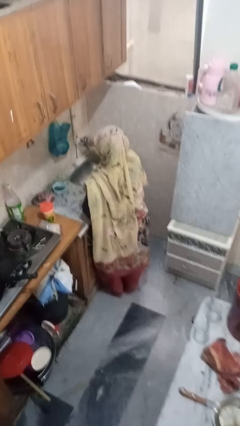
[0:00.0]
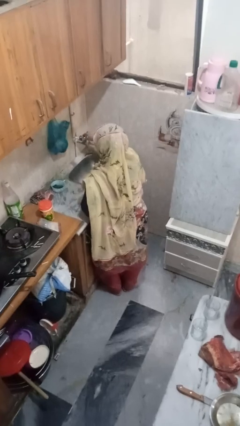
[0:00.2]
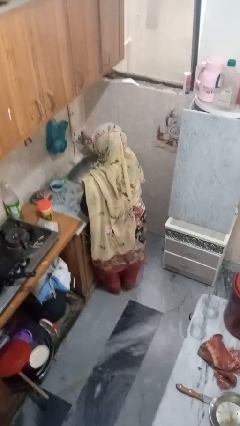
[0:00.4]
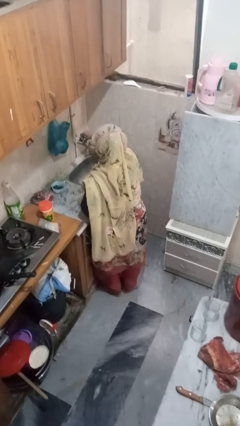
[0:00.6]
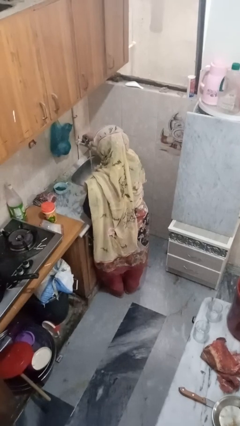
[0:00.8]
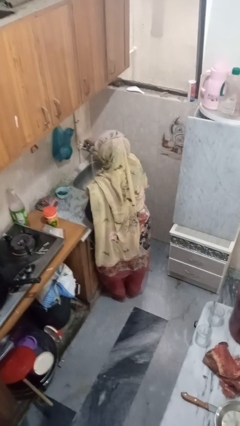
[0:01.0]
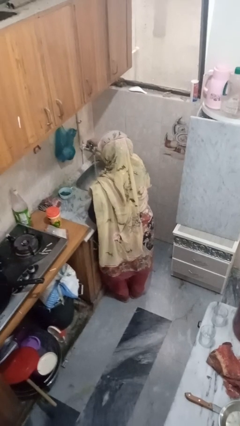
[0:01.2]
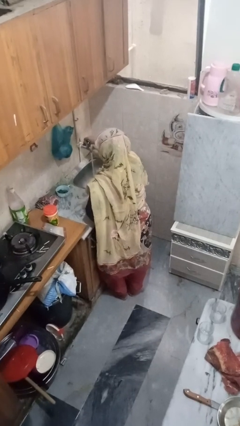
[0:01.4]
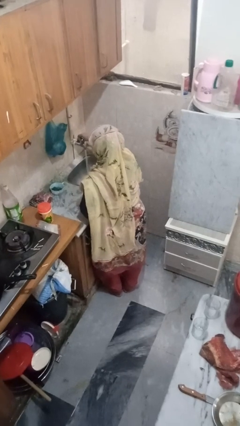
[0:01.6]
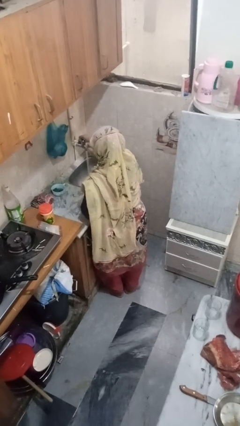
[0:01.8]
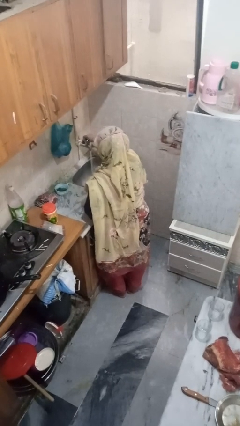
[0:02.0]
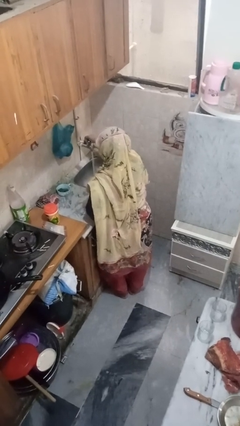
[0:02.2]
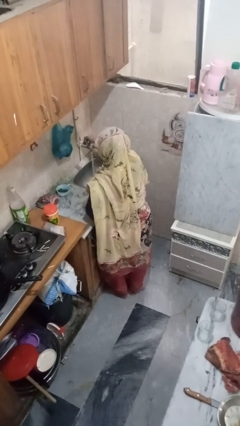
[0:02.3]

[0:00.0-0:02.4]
person turns on faucet

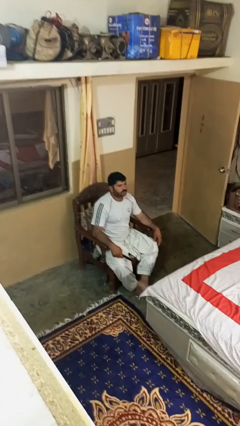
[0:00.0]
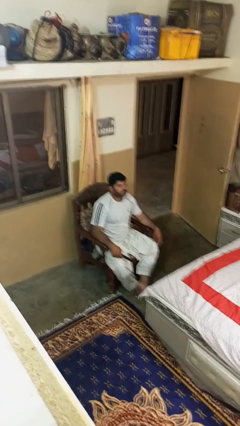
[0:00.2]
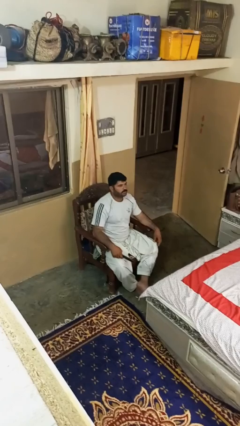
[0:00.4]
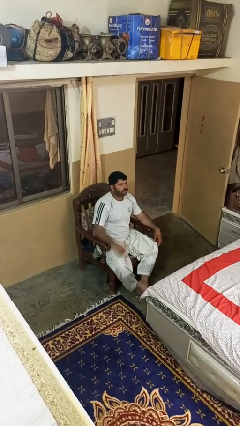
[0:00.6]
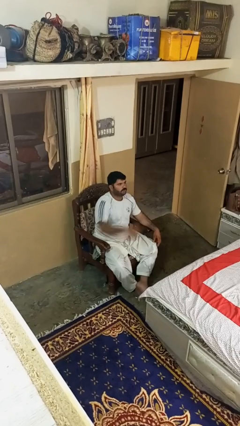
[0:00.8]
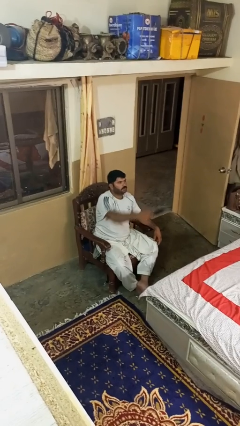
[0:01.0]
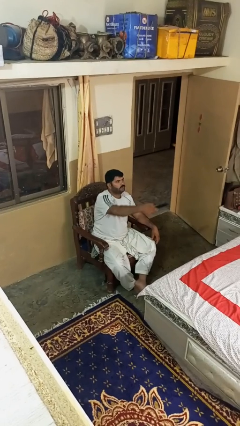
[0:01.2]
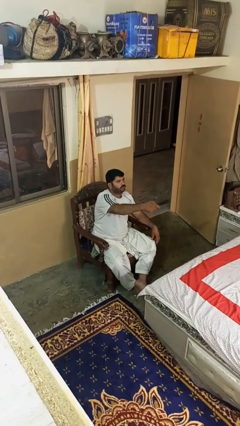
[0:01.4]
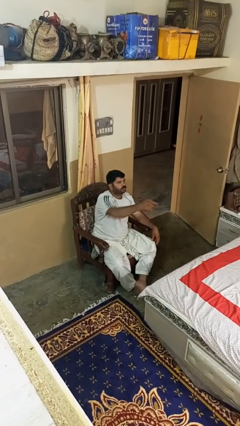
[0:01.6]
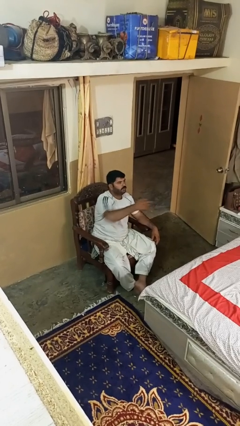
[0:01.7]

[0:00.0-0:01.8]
person uses television remote

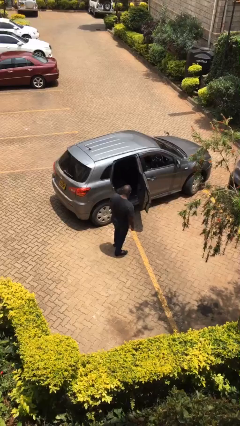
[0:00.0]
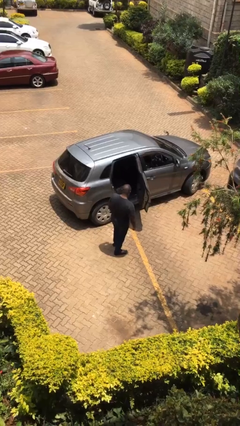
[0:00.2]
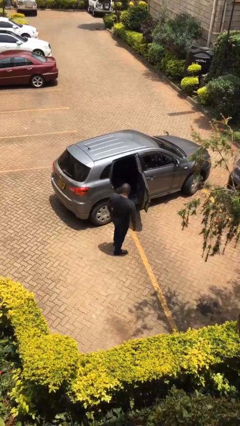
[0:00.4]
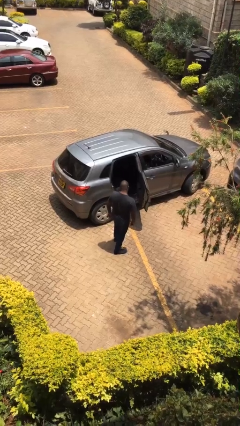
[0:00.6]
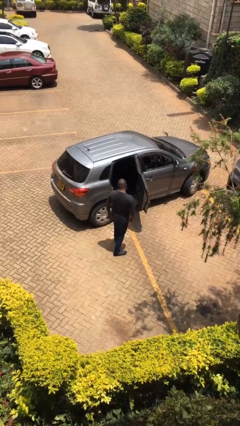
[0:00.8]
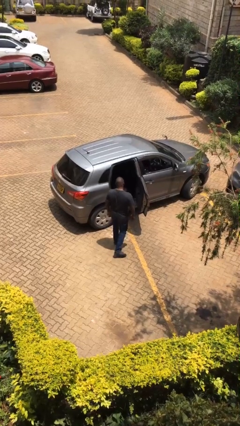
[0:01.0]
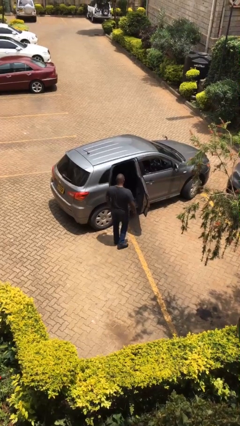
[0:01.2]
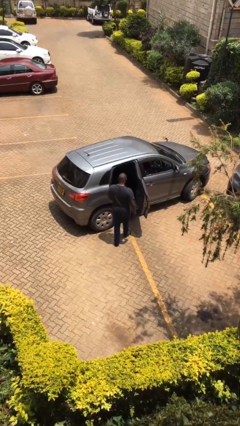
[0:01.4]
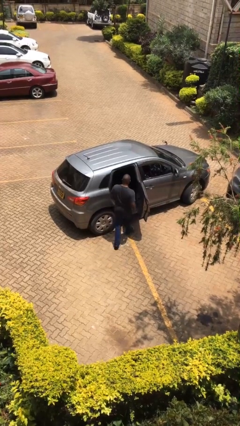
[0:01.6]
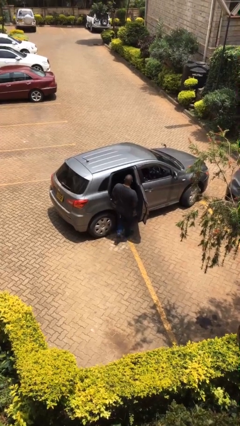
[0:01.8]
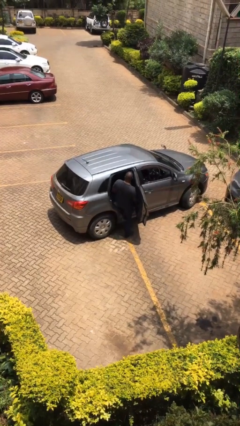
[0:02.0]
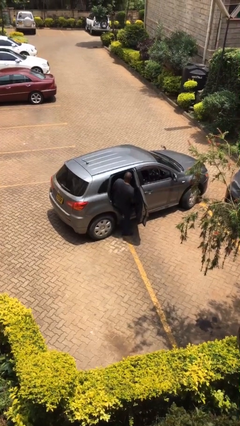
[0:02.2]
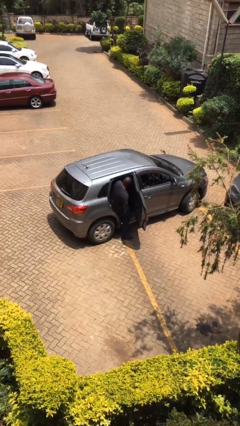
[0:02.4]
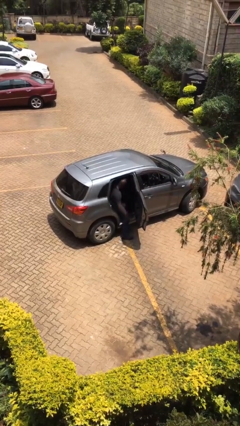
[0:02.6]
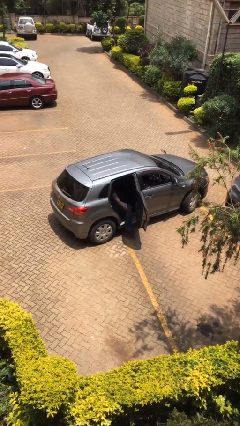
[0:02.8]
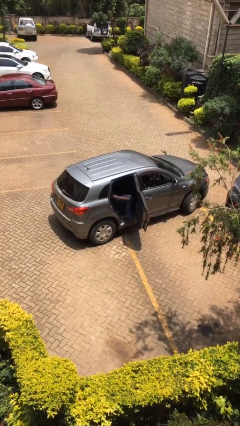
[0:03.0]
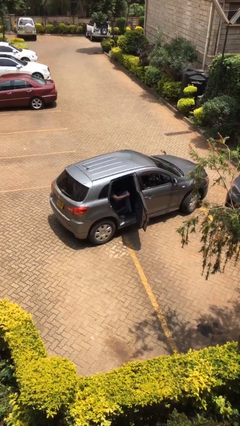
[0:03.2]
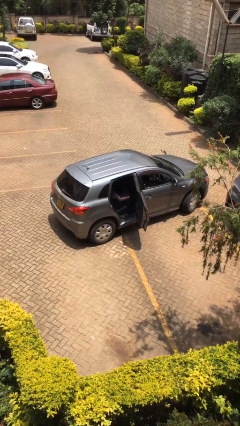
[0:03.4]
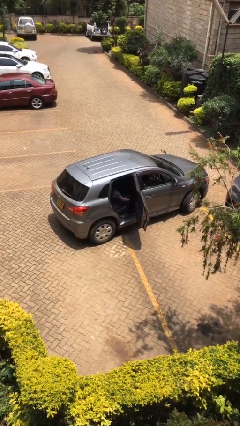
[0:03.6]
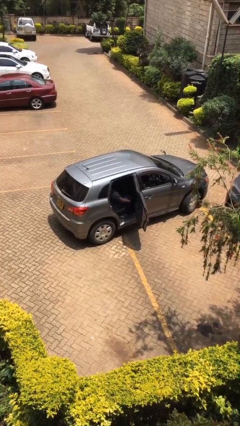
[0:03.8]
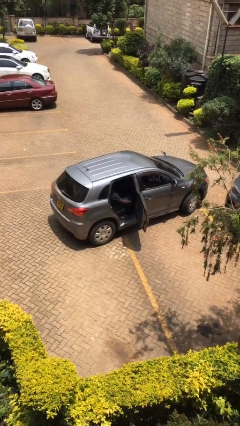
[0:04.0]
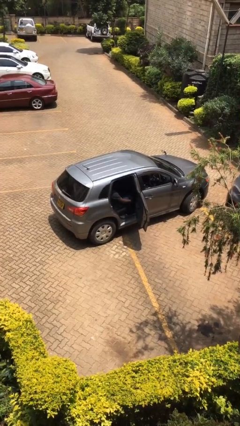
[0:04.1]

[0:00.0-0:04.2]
person enters car

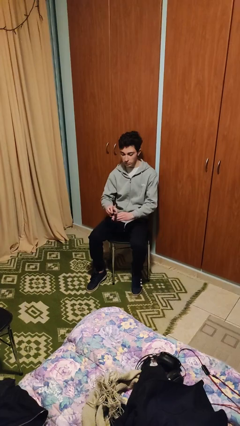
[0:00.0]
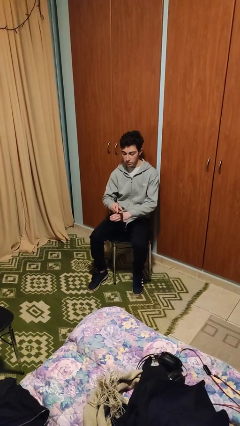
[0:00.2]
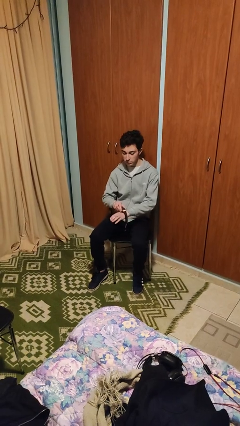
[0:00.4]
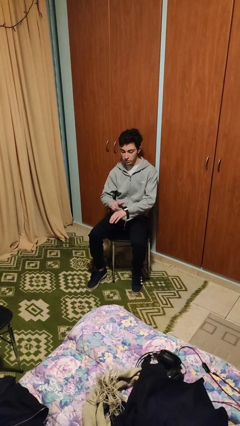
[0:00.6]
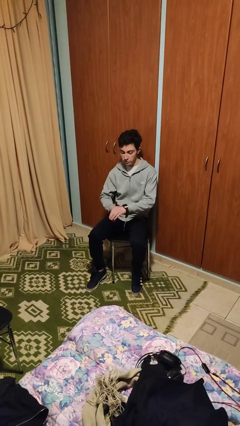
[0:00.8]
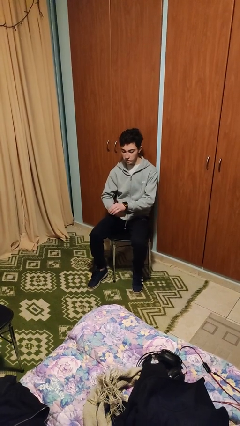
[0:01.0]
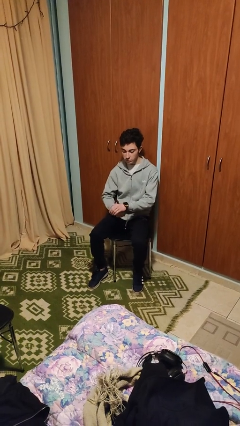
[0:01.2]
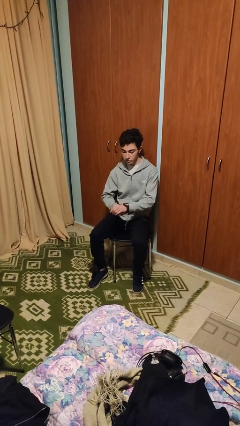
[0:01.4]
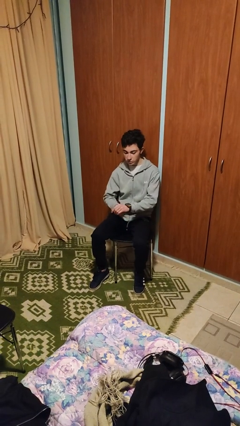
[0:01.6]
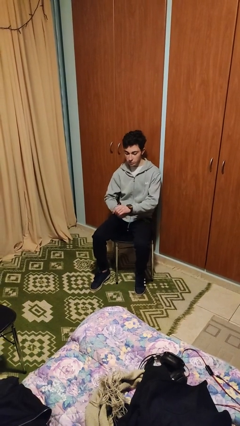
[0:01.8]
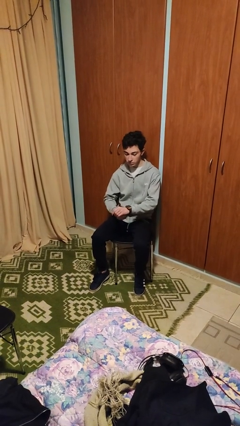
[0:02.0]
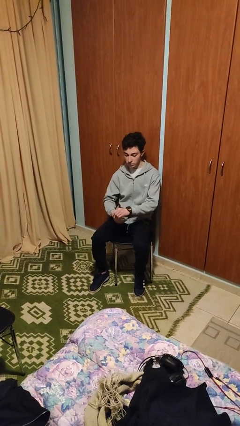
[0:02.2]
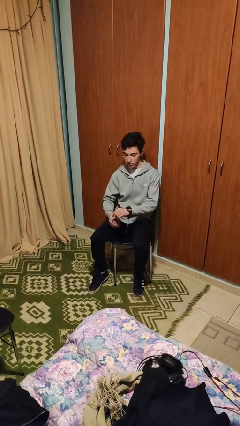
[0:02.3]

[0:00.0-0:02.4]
person puts on wristwatch

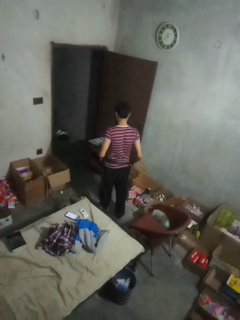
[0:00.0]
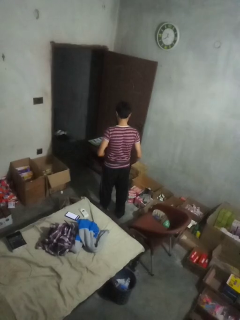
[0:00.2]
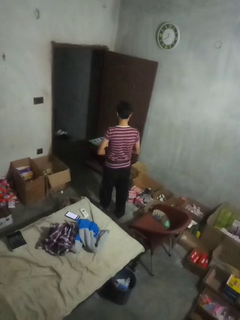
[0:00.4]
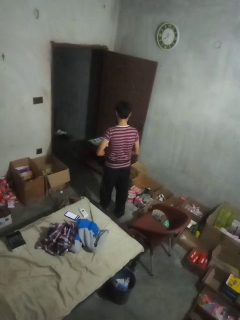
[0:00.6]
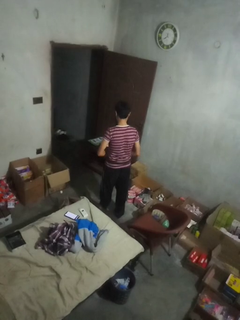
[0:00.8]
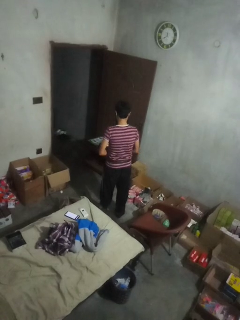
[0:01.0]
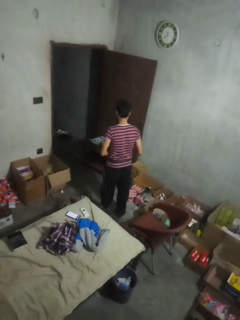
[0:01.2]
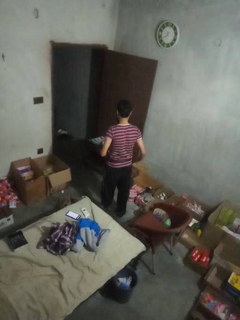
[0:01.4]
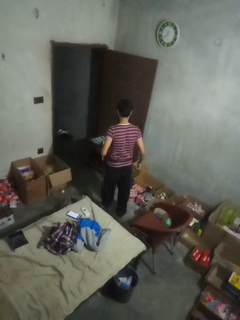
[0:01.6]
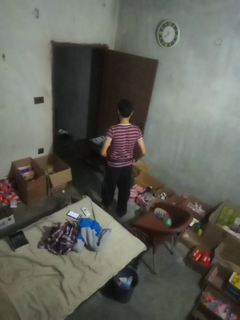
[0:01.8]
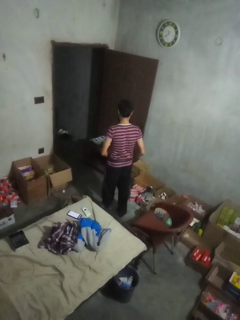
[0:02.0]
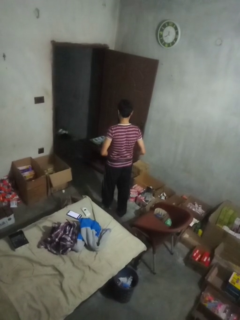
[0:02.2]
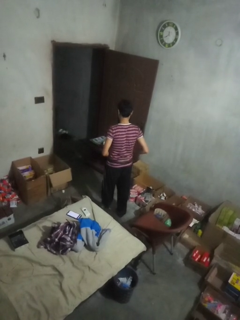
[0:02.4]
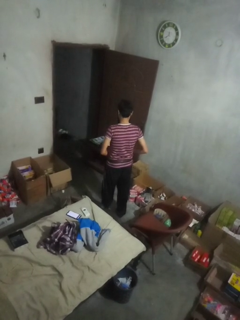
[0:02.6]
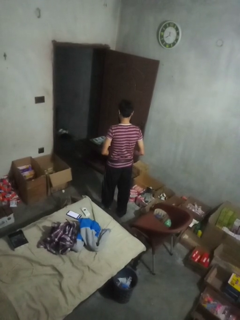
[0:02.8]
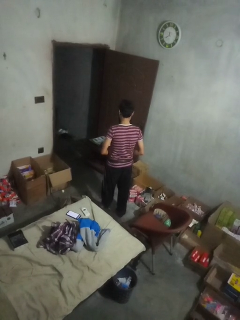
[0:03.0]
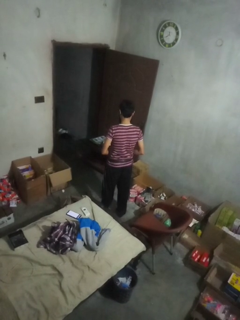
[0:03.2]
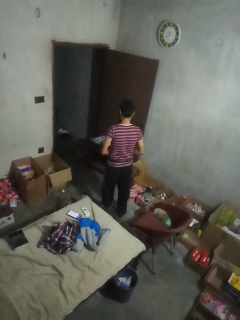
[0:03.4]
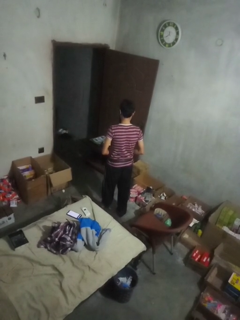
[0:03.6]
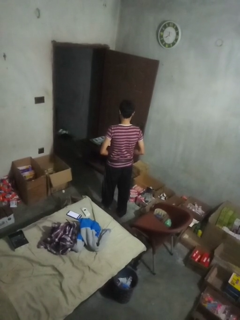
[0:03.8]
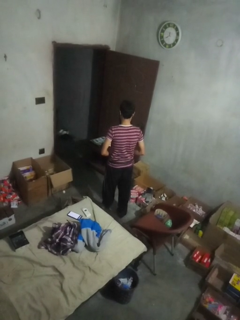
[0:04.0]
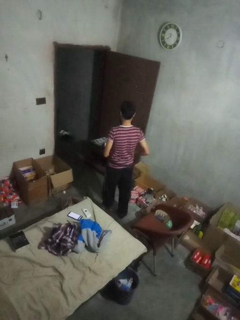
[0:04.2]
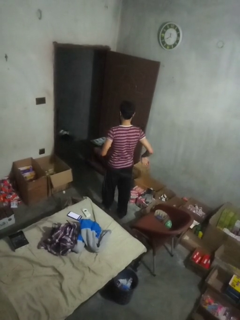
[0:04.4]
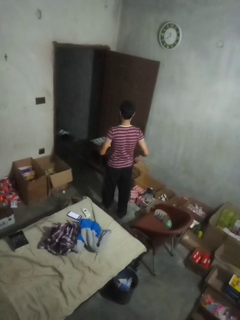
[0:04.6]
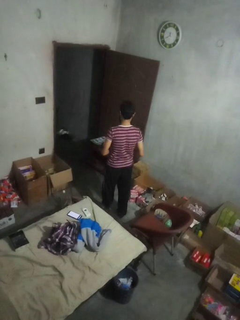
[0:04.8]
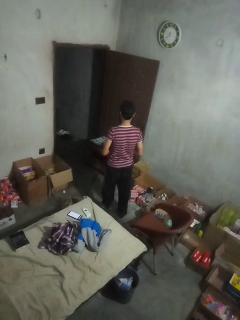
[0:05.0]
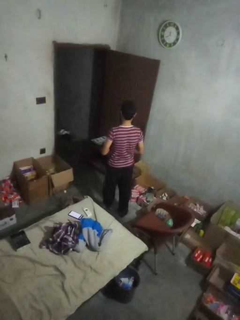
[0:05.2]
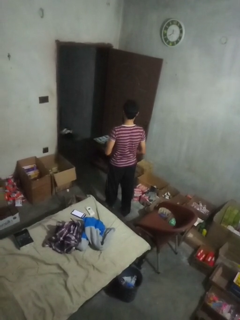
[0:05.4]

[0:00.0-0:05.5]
person takes off belt

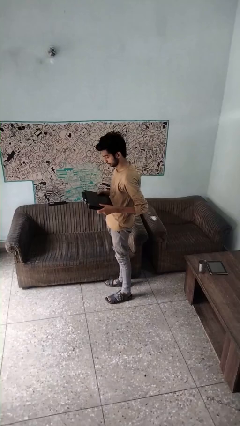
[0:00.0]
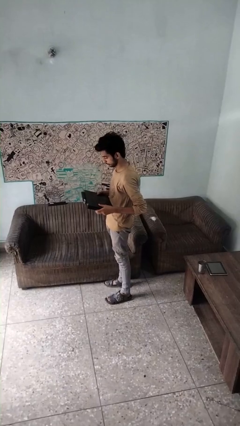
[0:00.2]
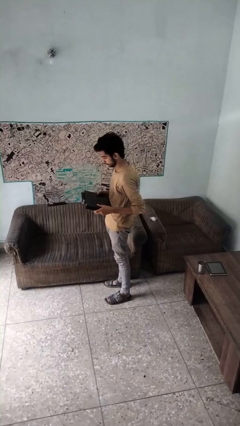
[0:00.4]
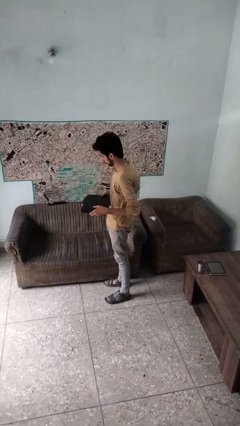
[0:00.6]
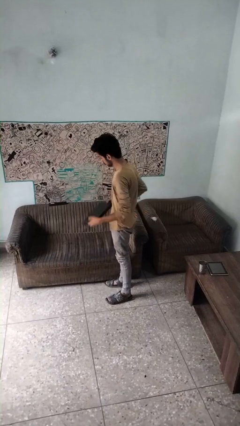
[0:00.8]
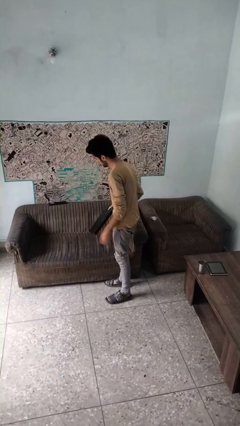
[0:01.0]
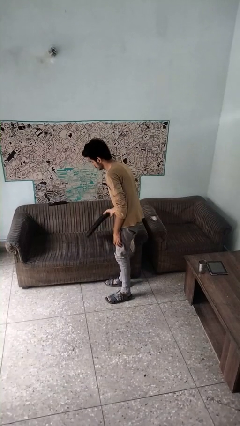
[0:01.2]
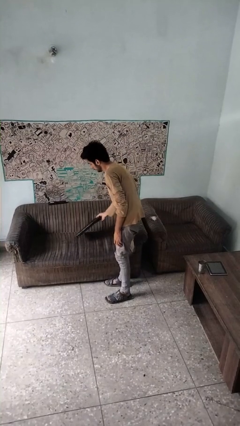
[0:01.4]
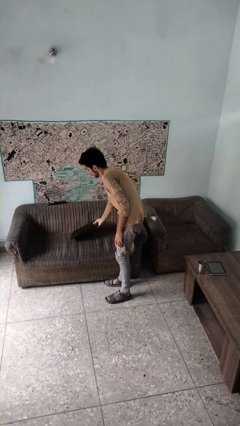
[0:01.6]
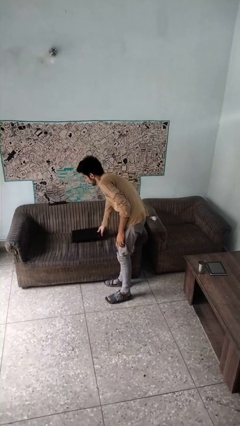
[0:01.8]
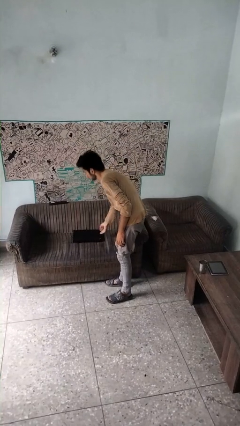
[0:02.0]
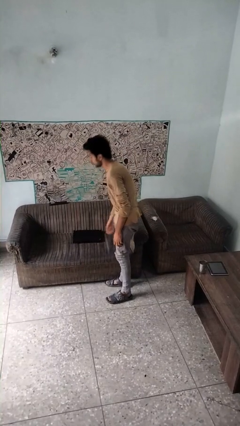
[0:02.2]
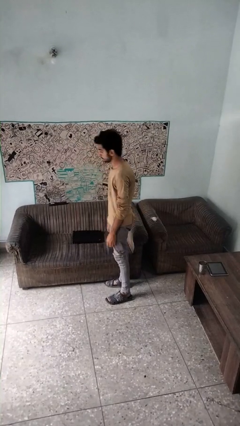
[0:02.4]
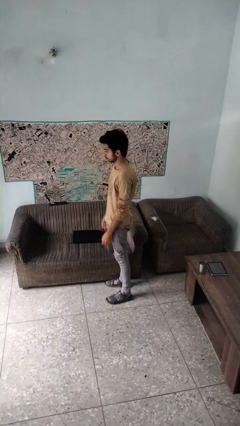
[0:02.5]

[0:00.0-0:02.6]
person puts down object on couch

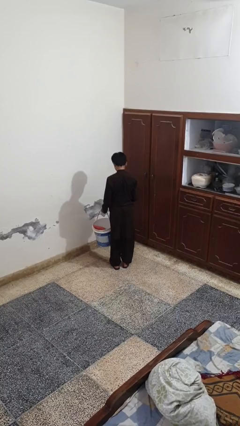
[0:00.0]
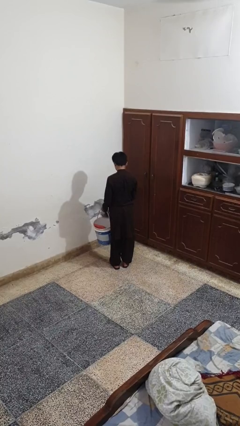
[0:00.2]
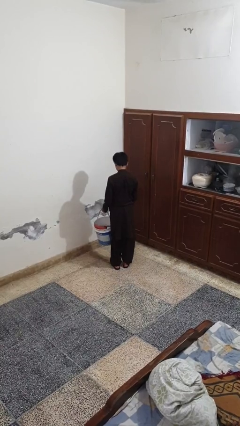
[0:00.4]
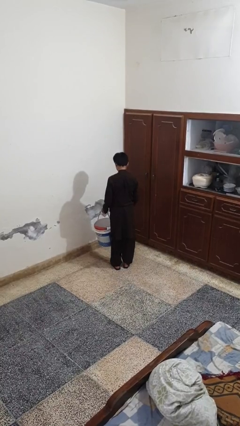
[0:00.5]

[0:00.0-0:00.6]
person puts object into basket
